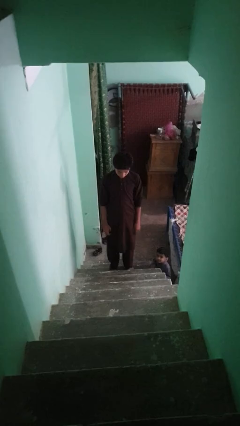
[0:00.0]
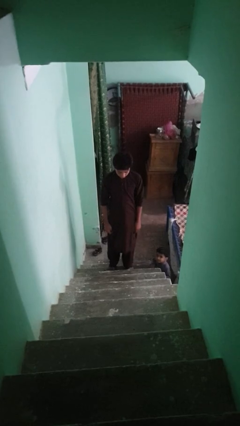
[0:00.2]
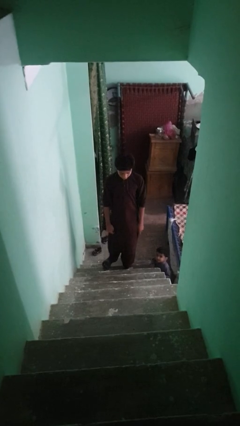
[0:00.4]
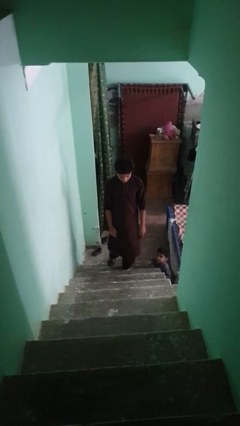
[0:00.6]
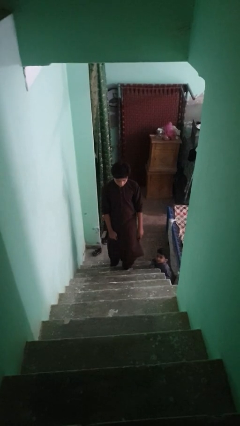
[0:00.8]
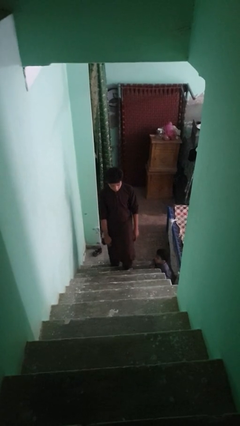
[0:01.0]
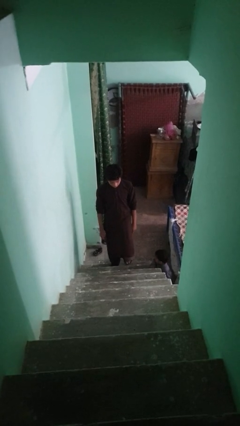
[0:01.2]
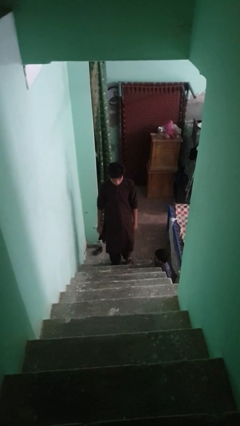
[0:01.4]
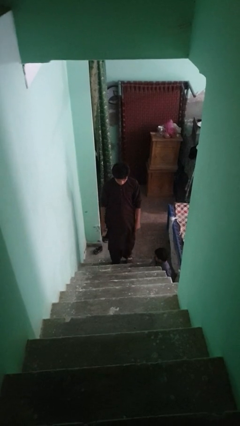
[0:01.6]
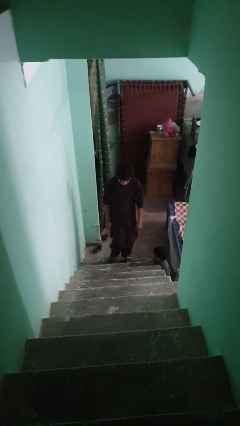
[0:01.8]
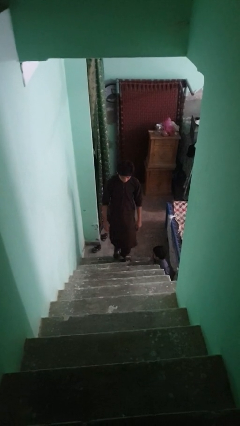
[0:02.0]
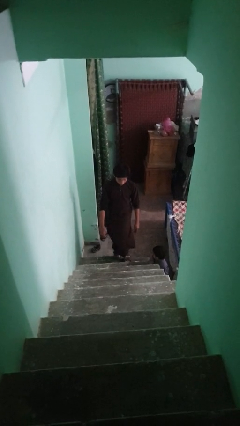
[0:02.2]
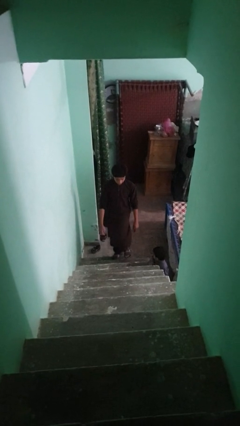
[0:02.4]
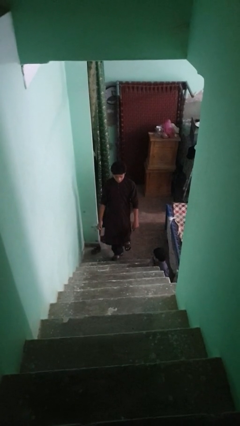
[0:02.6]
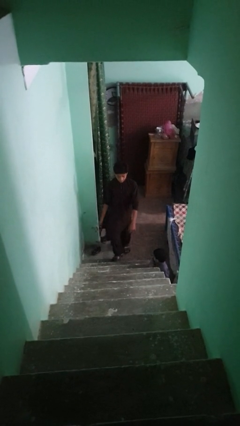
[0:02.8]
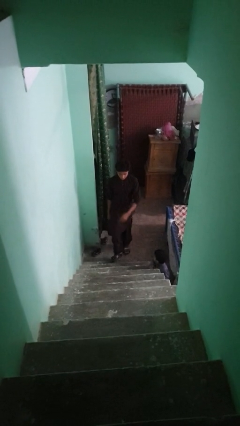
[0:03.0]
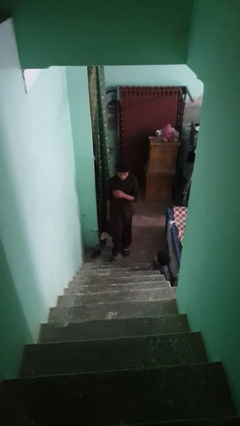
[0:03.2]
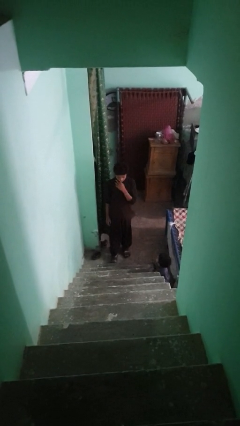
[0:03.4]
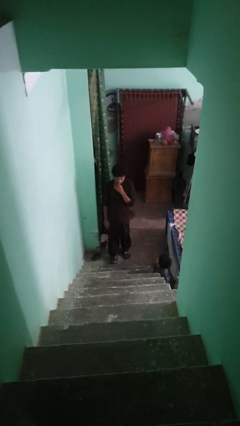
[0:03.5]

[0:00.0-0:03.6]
person climbs down stairs

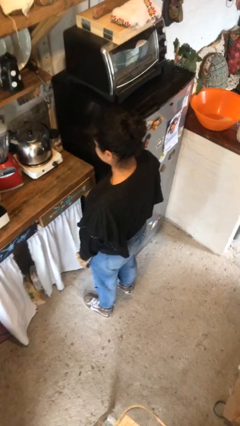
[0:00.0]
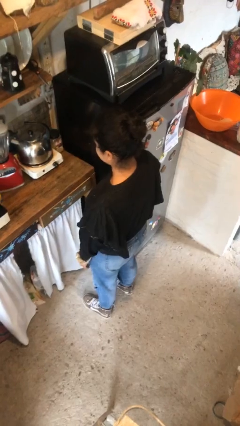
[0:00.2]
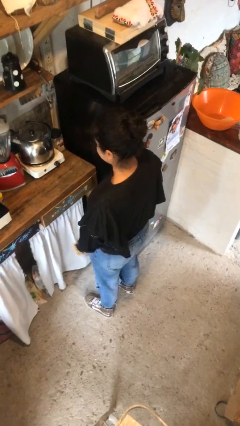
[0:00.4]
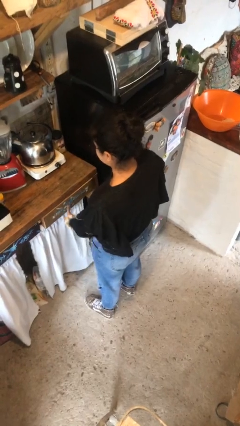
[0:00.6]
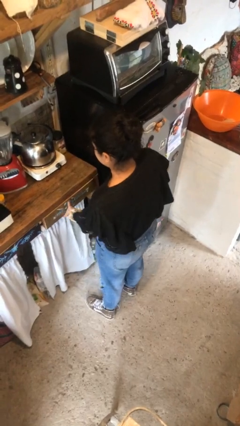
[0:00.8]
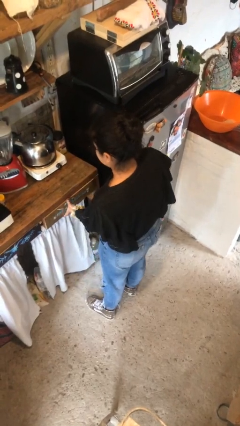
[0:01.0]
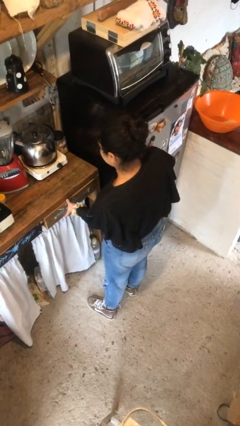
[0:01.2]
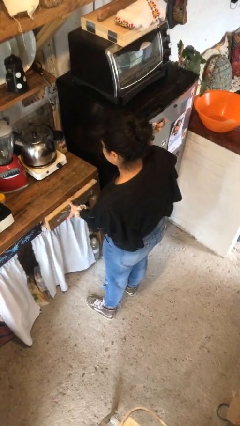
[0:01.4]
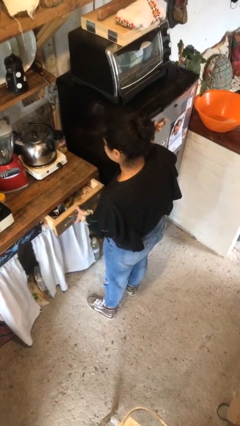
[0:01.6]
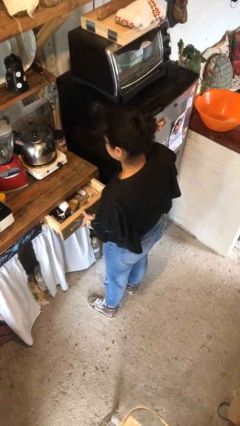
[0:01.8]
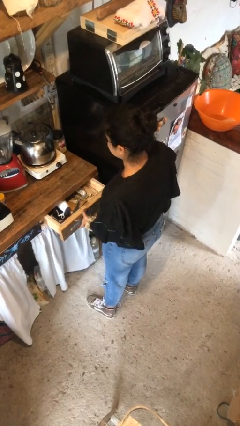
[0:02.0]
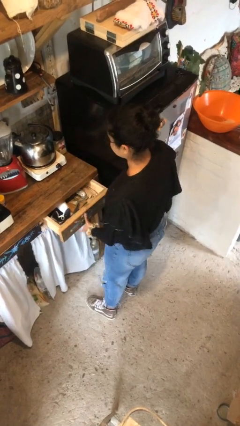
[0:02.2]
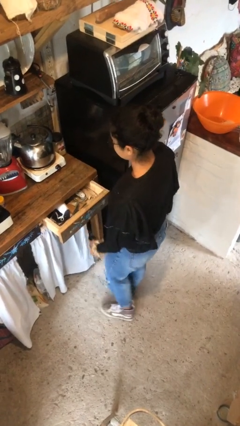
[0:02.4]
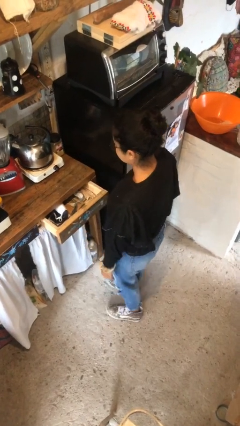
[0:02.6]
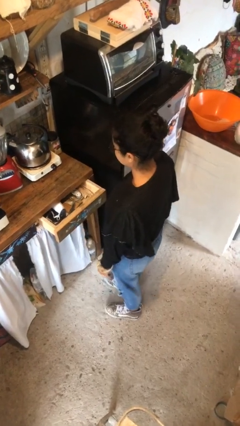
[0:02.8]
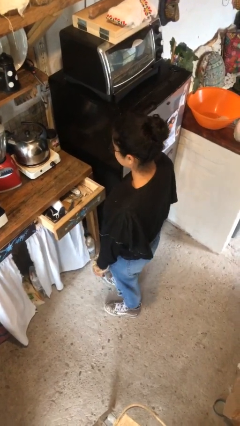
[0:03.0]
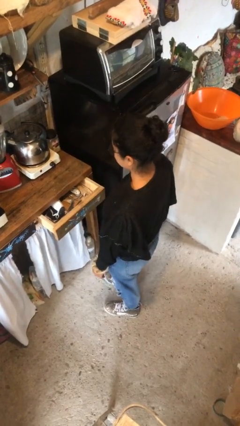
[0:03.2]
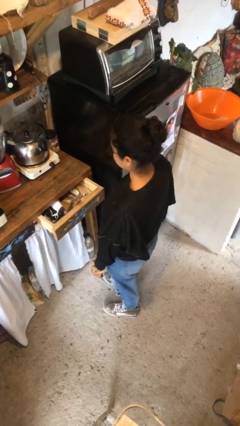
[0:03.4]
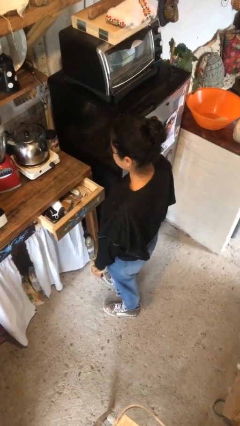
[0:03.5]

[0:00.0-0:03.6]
person opens kitchen drawer

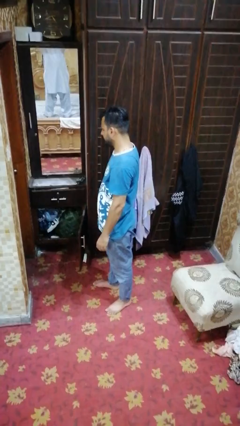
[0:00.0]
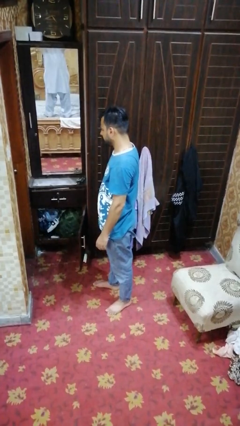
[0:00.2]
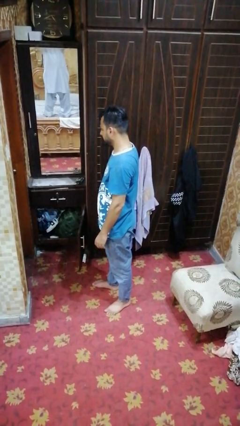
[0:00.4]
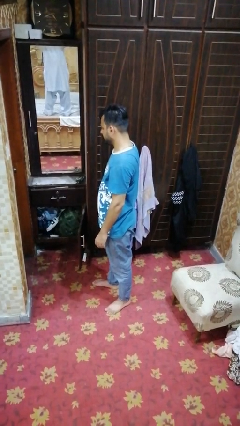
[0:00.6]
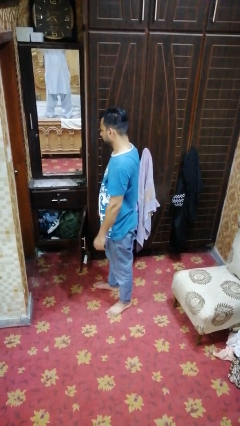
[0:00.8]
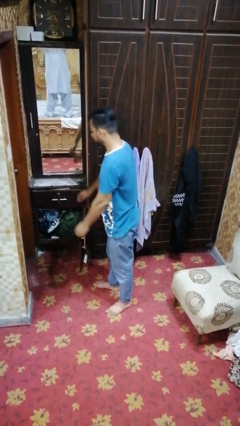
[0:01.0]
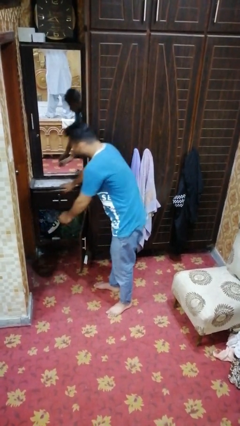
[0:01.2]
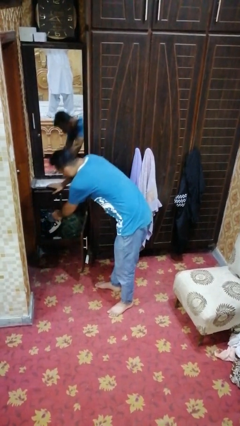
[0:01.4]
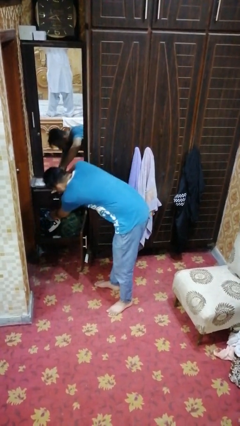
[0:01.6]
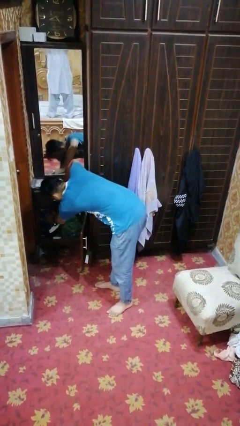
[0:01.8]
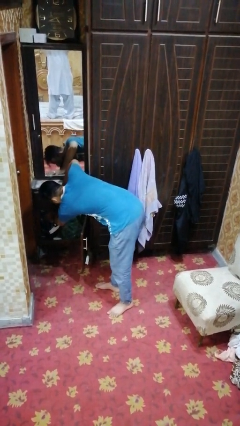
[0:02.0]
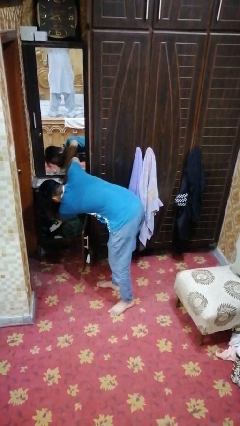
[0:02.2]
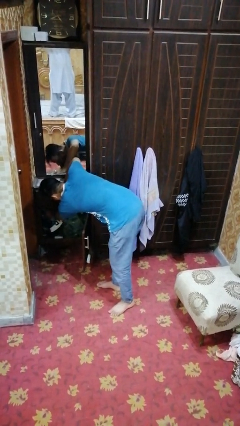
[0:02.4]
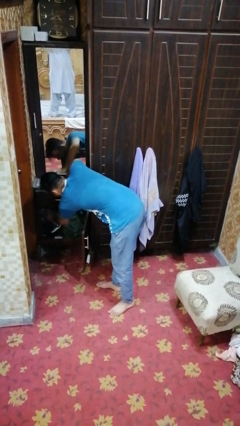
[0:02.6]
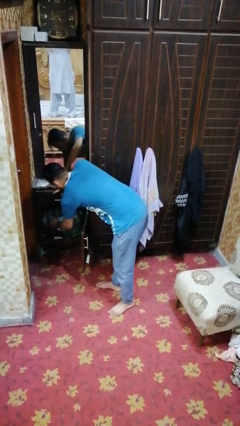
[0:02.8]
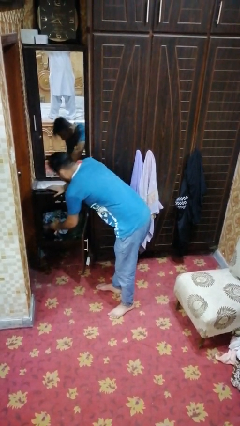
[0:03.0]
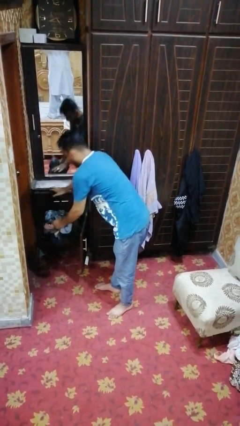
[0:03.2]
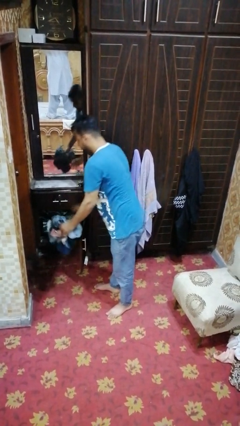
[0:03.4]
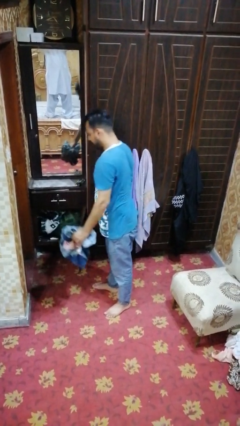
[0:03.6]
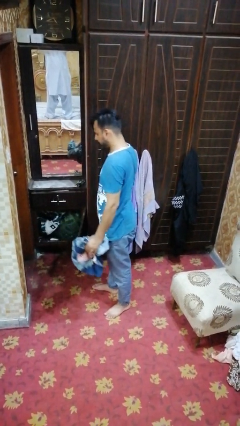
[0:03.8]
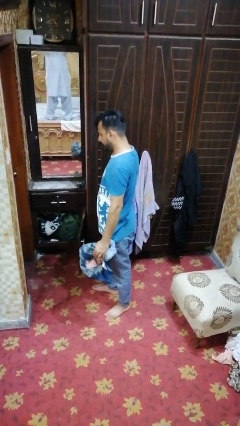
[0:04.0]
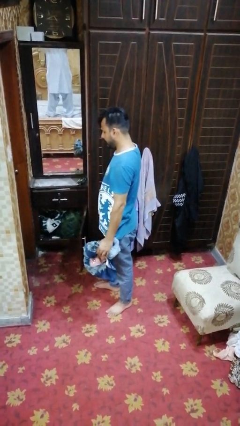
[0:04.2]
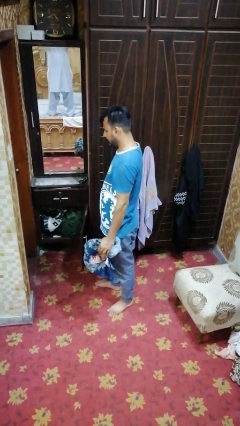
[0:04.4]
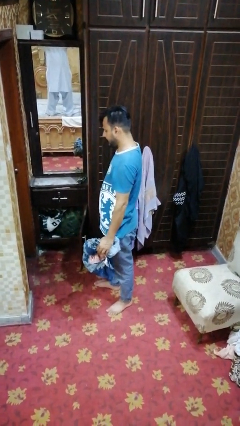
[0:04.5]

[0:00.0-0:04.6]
person takes clothes from dresser

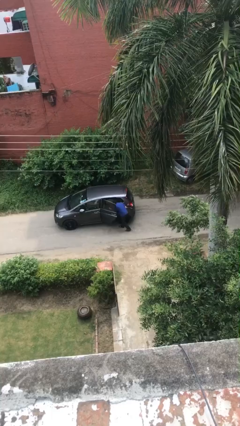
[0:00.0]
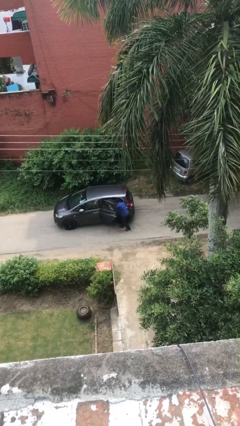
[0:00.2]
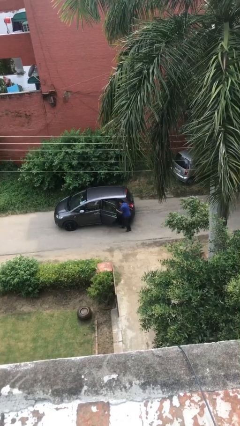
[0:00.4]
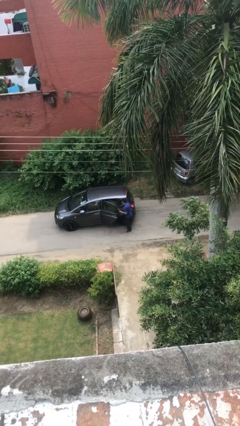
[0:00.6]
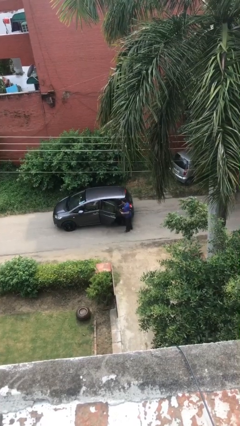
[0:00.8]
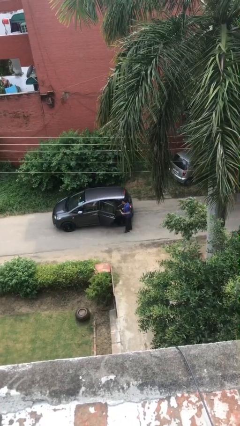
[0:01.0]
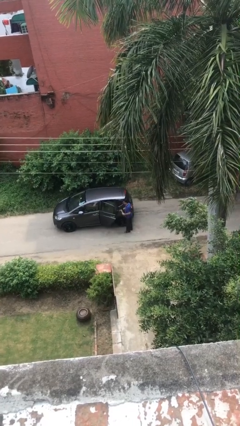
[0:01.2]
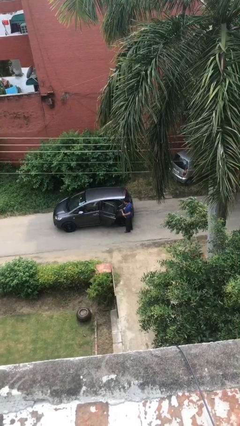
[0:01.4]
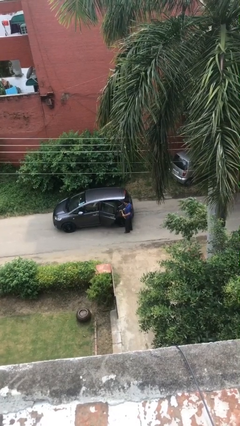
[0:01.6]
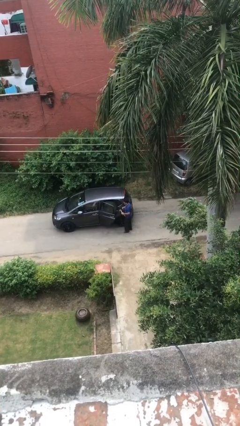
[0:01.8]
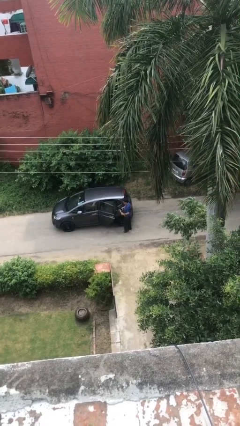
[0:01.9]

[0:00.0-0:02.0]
person unloads car

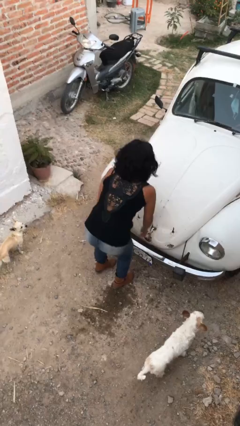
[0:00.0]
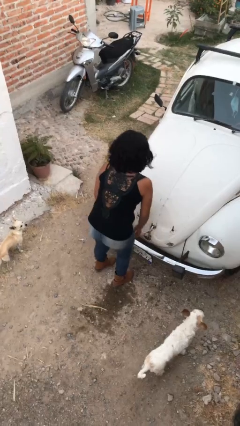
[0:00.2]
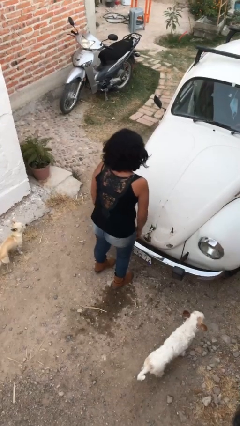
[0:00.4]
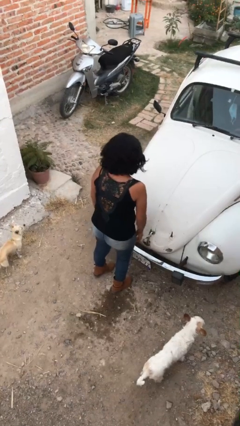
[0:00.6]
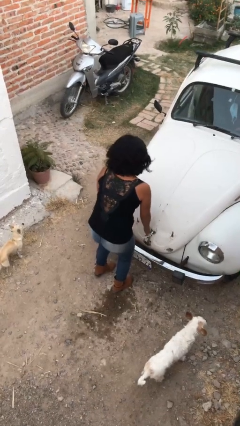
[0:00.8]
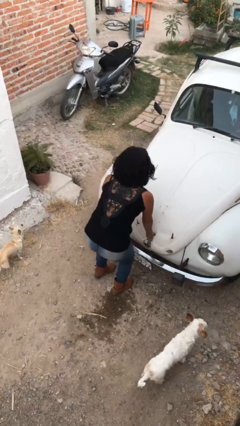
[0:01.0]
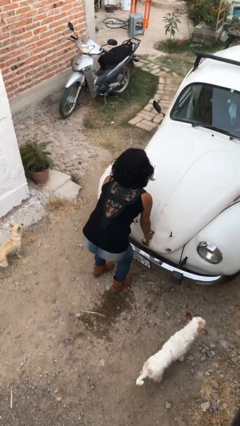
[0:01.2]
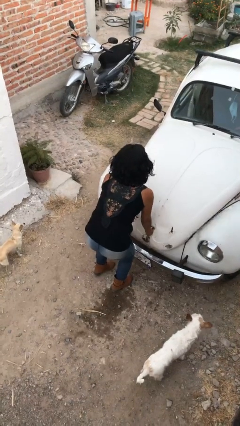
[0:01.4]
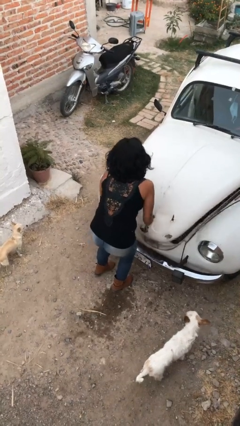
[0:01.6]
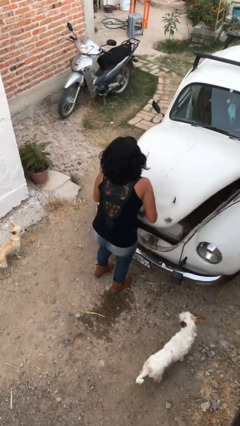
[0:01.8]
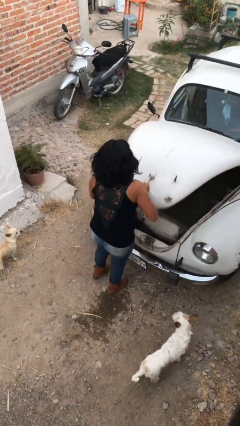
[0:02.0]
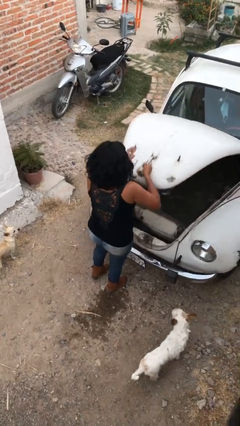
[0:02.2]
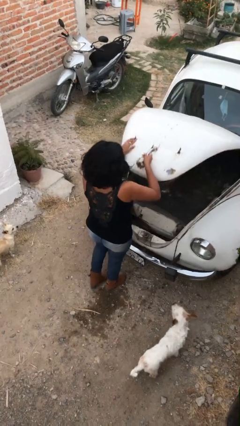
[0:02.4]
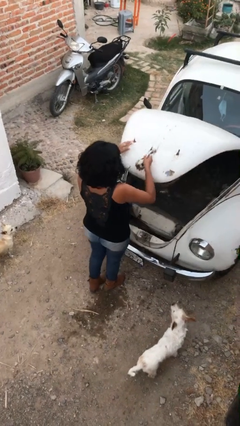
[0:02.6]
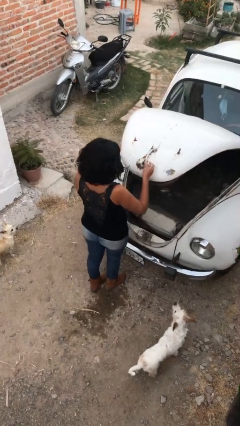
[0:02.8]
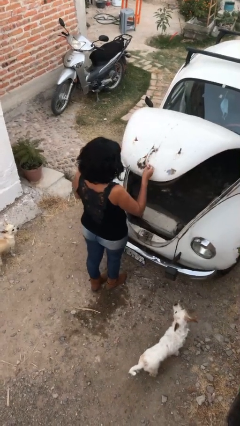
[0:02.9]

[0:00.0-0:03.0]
person opens car trunk

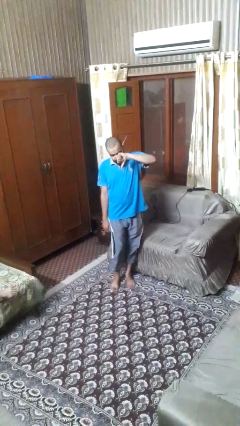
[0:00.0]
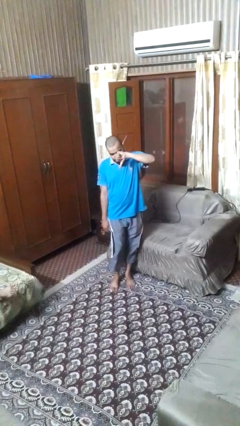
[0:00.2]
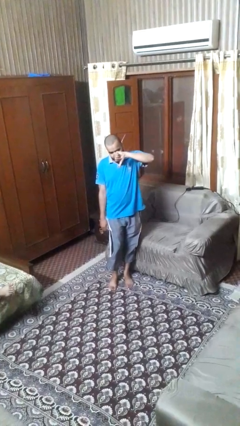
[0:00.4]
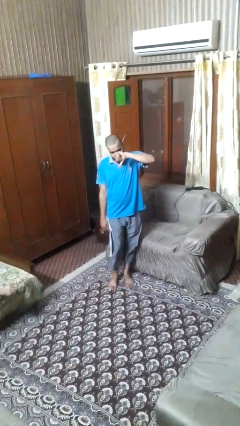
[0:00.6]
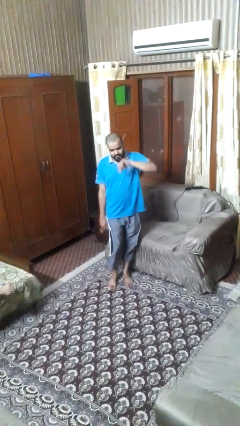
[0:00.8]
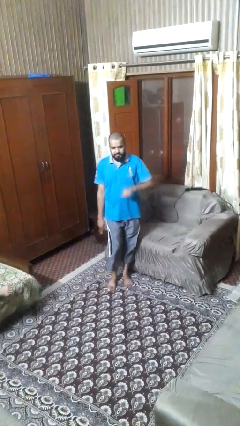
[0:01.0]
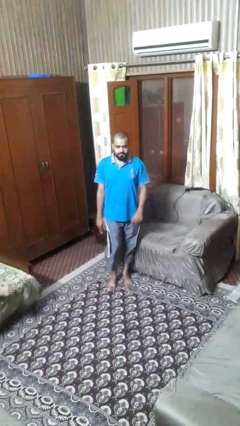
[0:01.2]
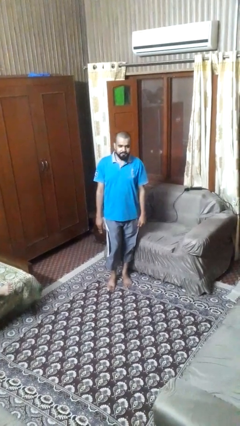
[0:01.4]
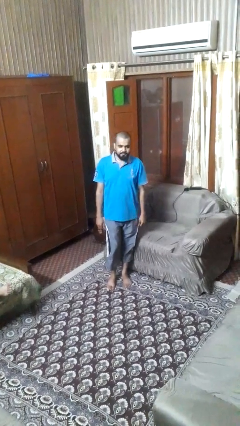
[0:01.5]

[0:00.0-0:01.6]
person gestures thumbs down
